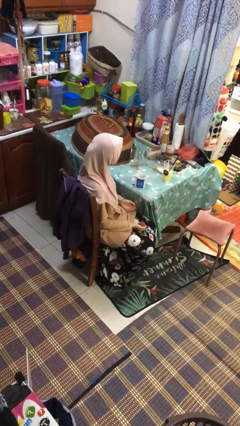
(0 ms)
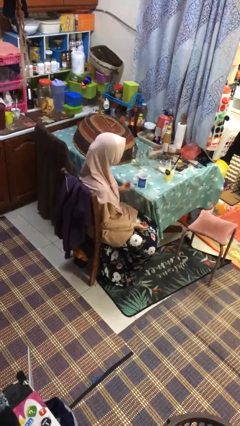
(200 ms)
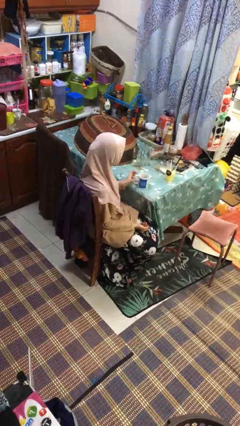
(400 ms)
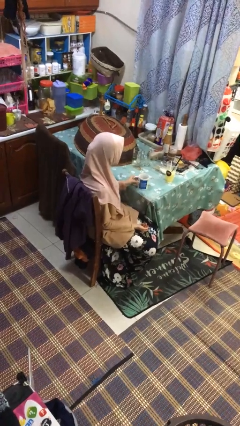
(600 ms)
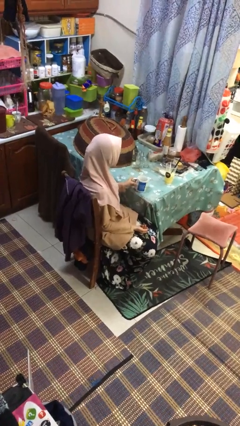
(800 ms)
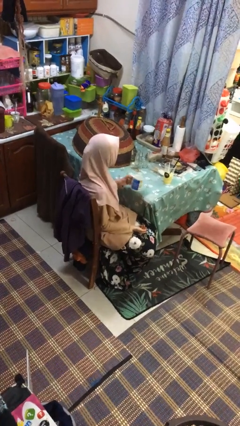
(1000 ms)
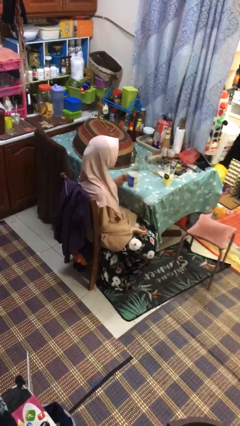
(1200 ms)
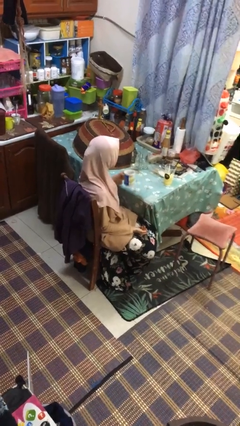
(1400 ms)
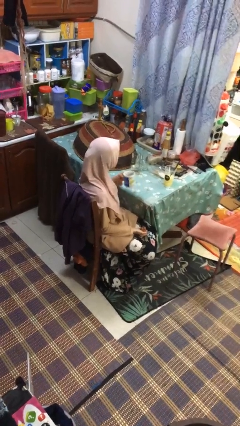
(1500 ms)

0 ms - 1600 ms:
person picks up object from table

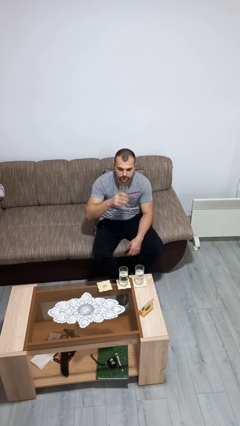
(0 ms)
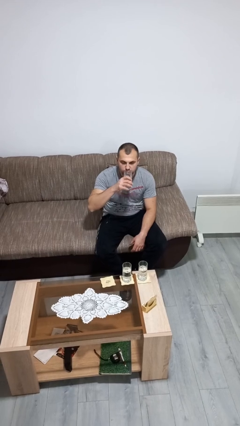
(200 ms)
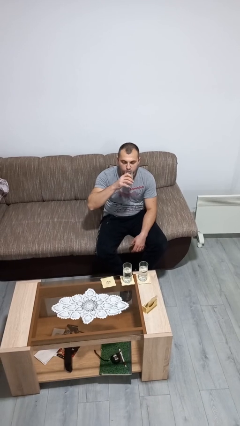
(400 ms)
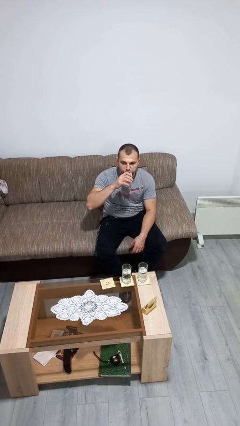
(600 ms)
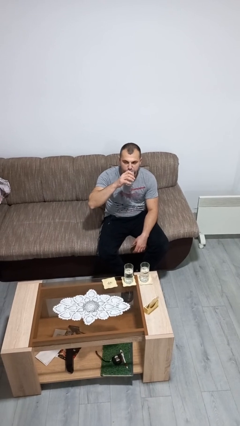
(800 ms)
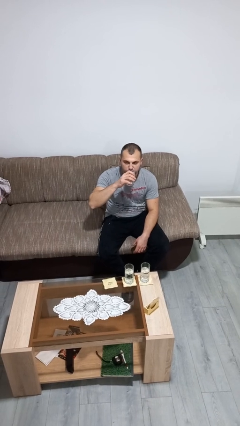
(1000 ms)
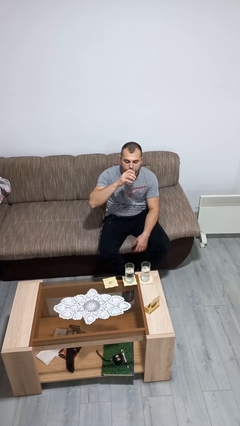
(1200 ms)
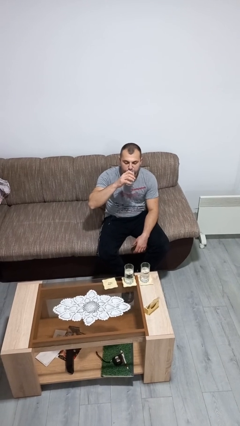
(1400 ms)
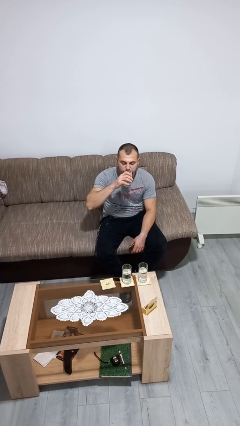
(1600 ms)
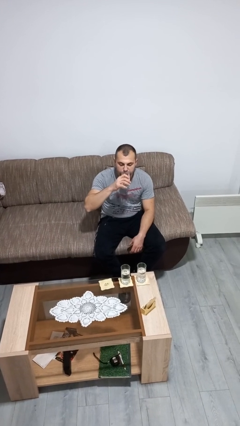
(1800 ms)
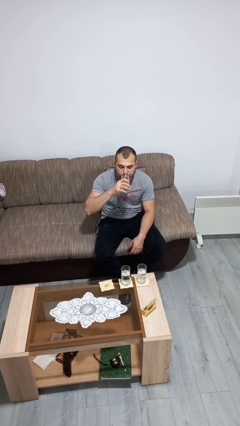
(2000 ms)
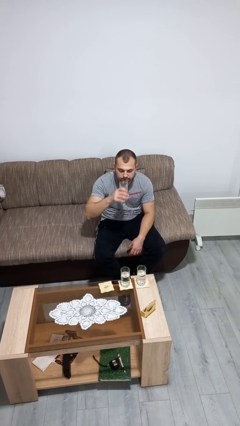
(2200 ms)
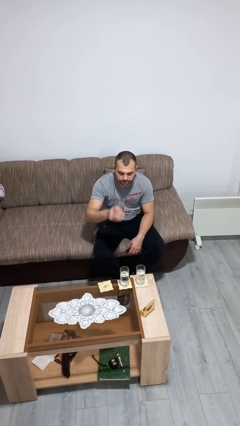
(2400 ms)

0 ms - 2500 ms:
person drinks from shotglass

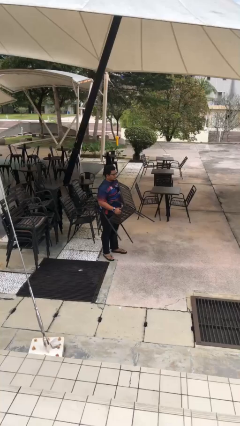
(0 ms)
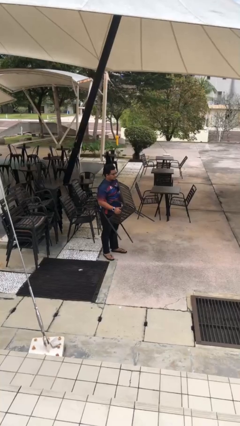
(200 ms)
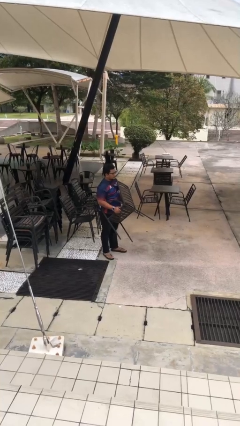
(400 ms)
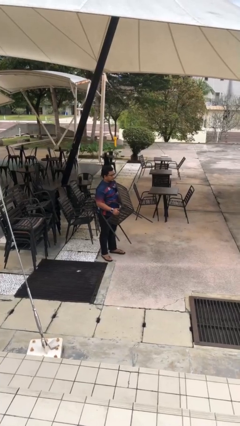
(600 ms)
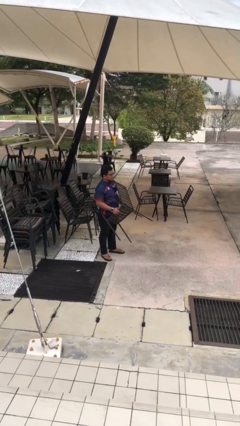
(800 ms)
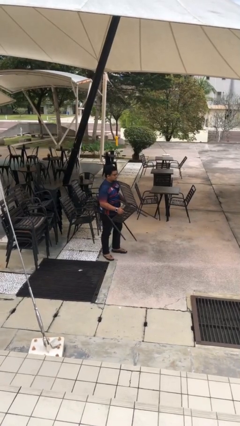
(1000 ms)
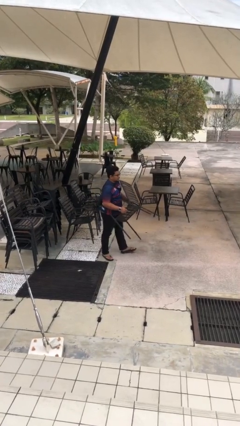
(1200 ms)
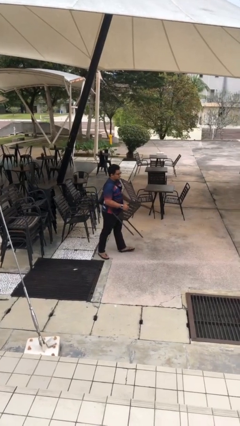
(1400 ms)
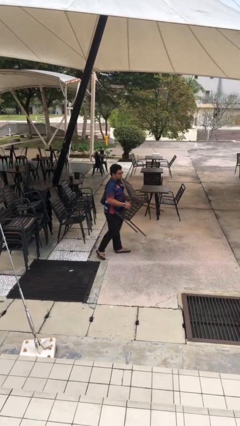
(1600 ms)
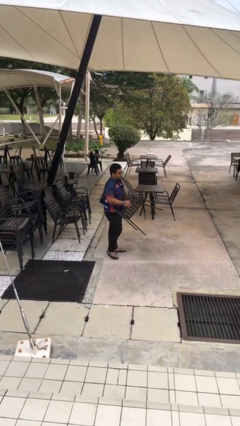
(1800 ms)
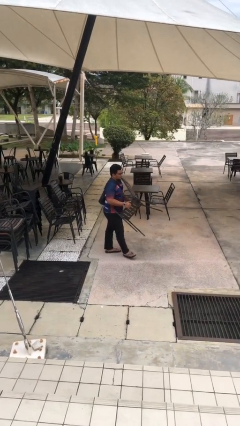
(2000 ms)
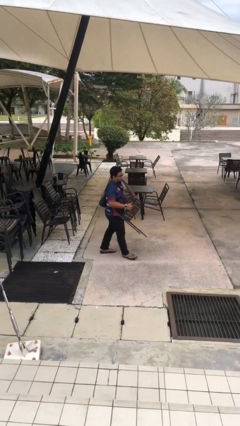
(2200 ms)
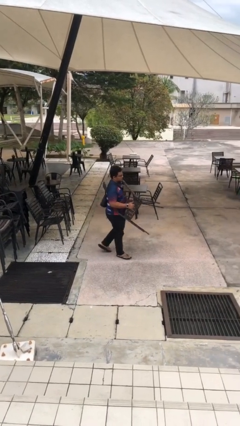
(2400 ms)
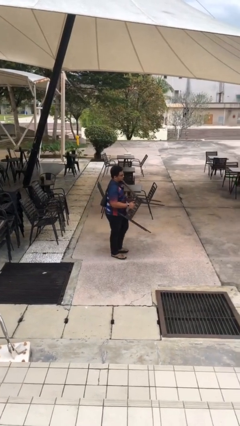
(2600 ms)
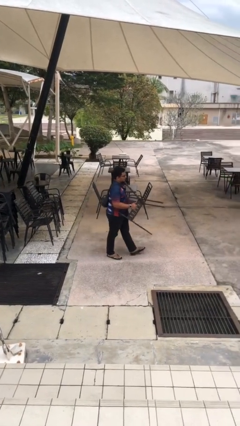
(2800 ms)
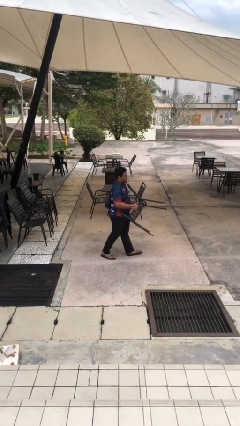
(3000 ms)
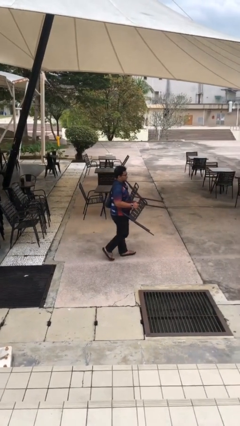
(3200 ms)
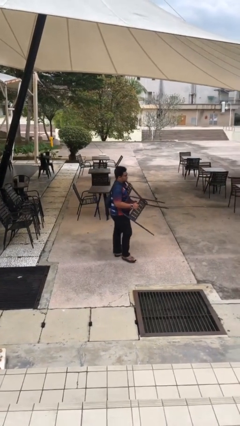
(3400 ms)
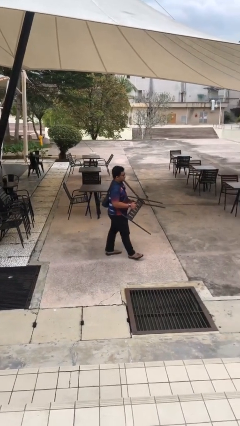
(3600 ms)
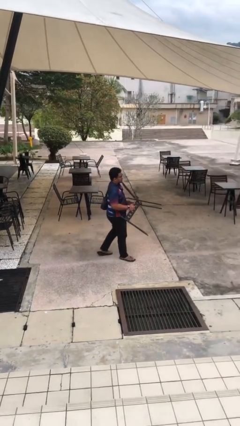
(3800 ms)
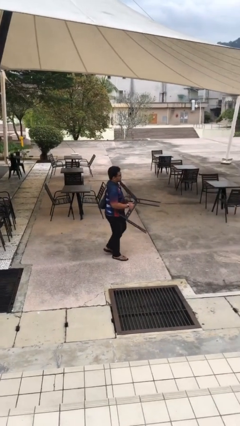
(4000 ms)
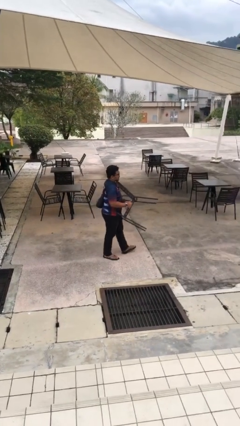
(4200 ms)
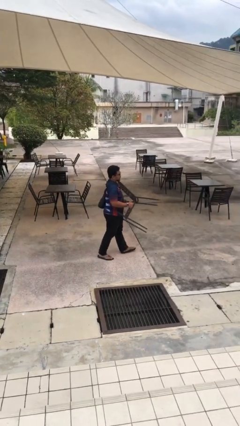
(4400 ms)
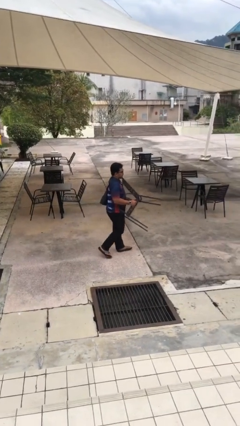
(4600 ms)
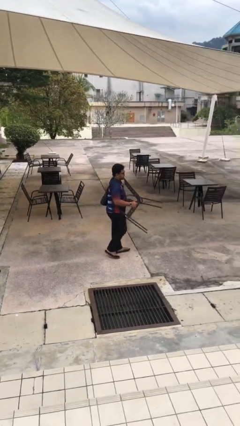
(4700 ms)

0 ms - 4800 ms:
person carries heavy object

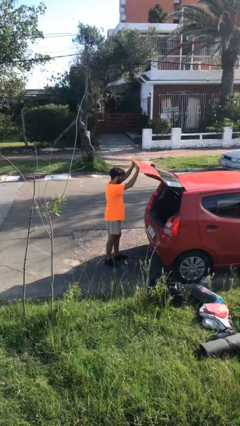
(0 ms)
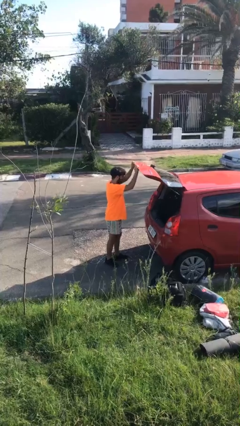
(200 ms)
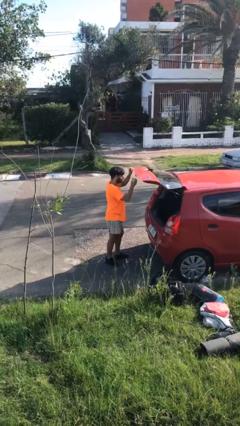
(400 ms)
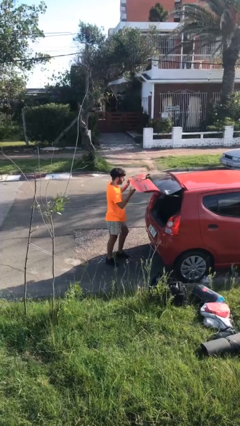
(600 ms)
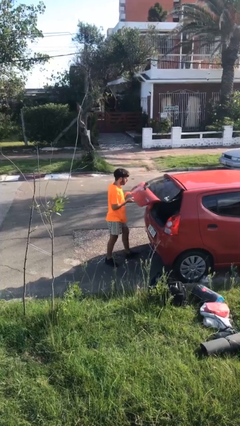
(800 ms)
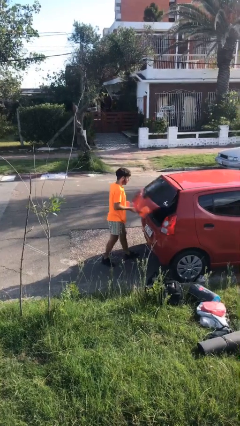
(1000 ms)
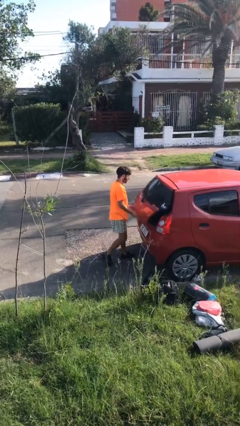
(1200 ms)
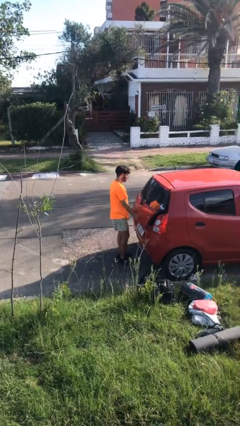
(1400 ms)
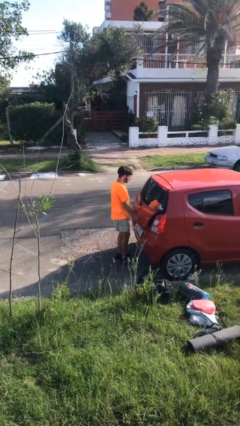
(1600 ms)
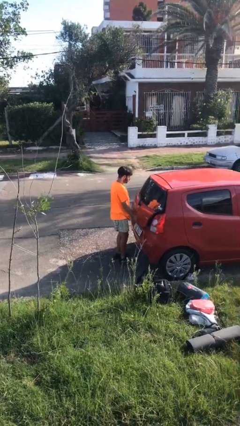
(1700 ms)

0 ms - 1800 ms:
person closes car trunk

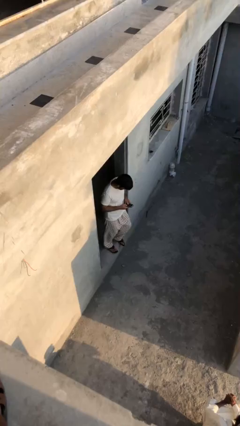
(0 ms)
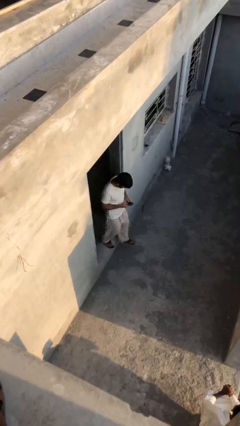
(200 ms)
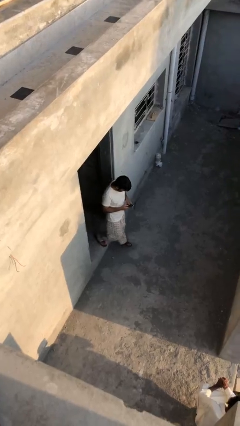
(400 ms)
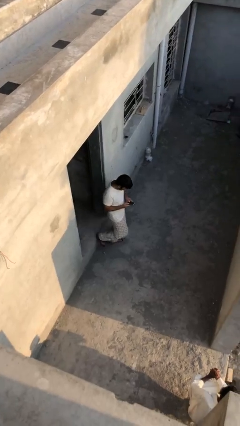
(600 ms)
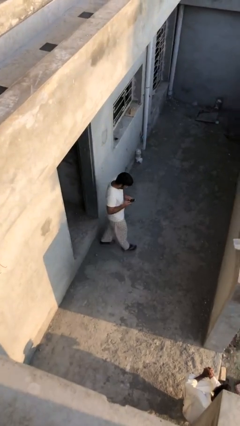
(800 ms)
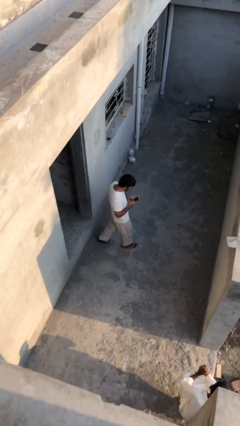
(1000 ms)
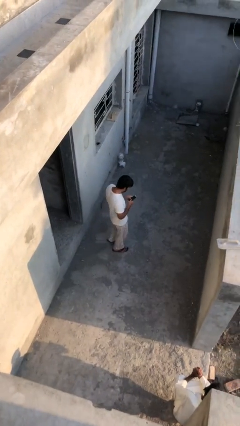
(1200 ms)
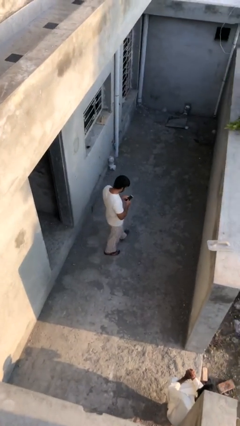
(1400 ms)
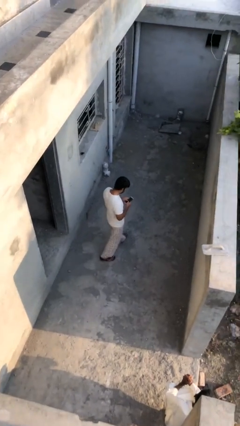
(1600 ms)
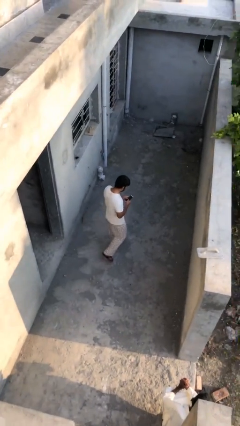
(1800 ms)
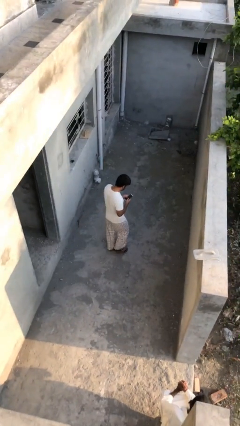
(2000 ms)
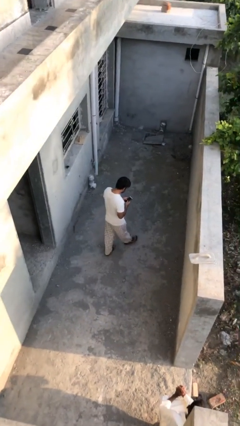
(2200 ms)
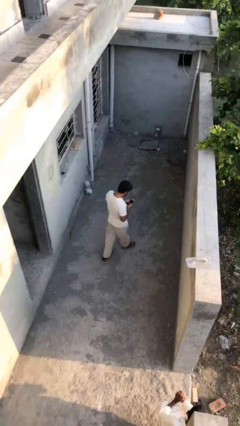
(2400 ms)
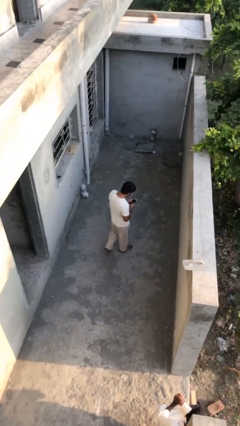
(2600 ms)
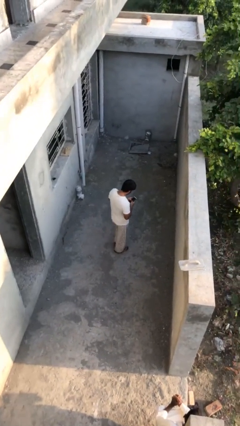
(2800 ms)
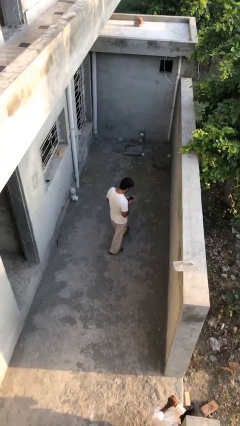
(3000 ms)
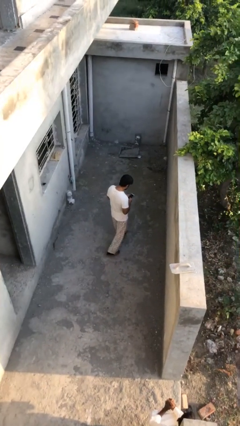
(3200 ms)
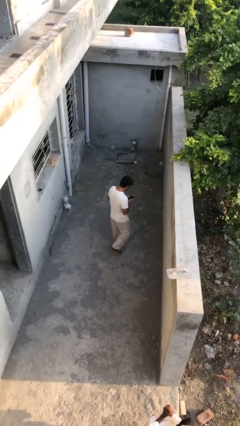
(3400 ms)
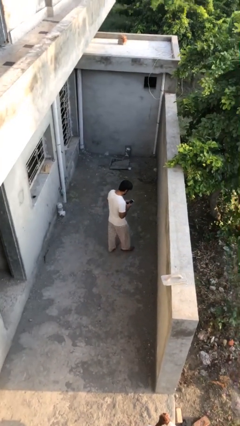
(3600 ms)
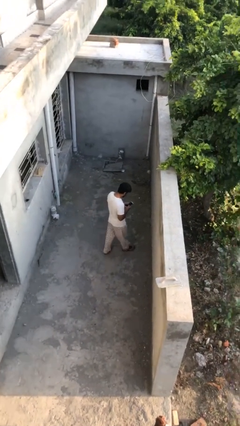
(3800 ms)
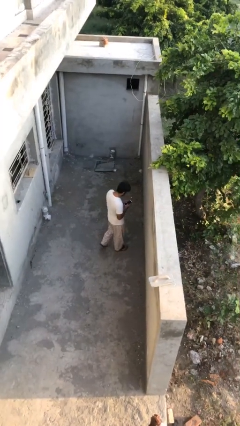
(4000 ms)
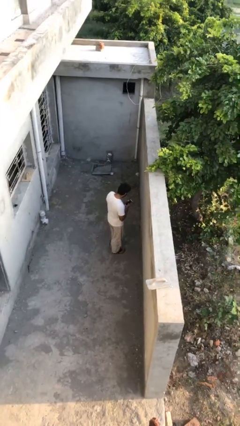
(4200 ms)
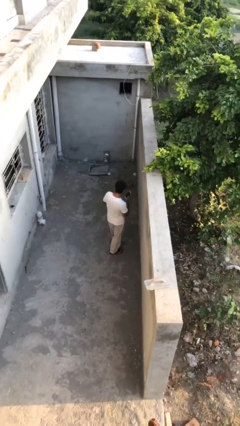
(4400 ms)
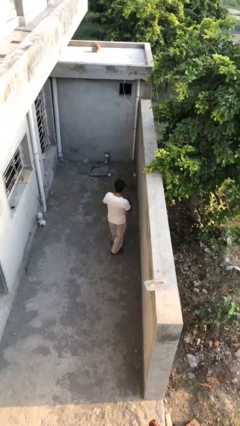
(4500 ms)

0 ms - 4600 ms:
person texts on phone

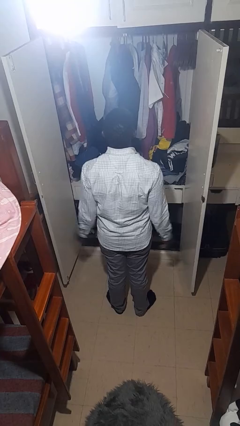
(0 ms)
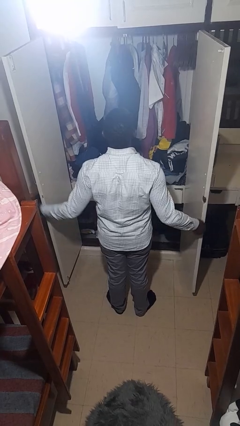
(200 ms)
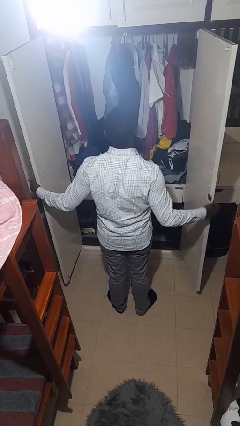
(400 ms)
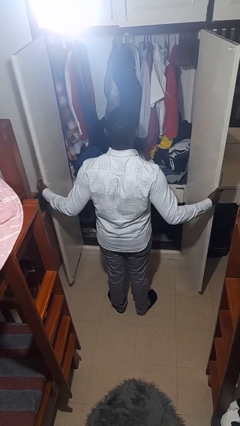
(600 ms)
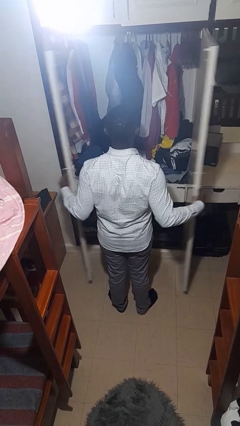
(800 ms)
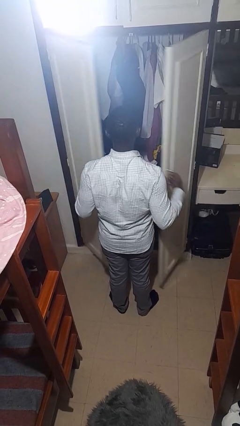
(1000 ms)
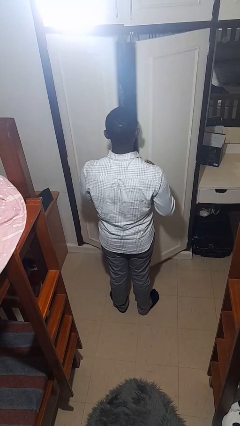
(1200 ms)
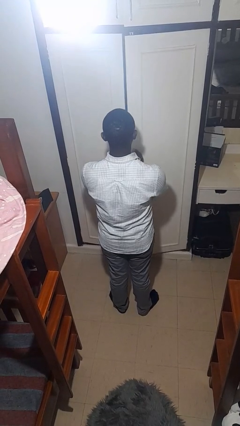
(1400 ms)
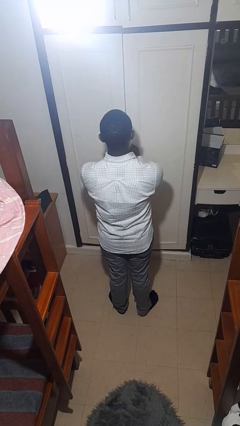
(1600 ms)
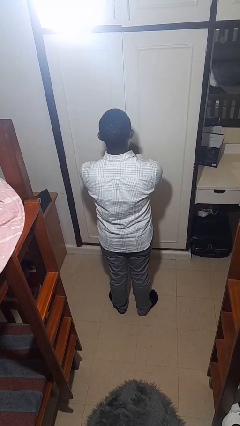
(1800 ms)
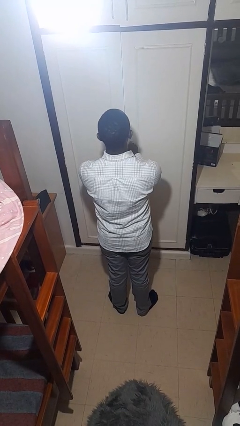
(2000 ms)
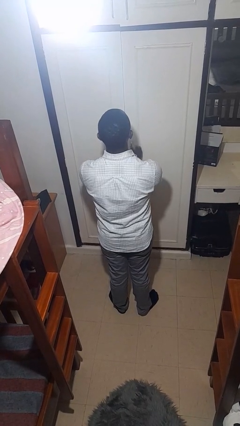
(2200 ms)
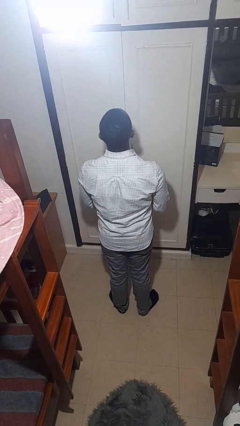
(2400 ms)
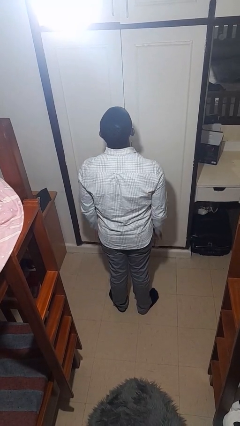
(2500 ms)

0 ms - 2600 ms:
person closes closet door
